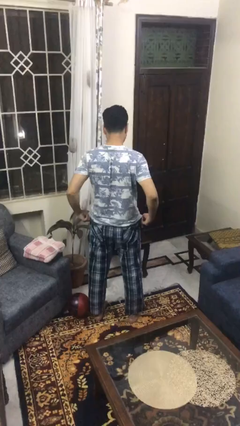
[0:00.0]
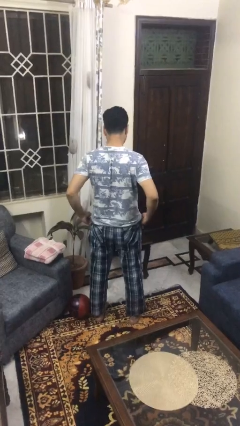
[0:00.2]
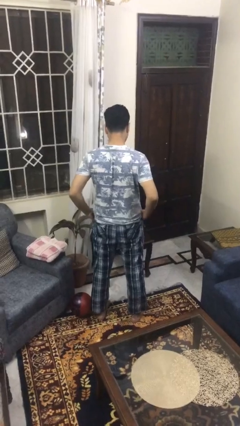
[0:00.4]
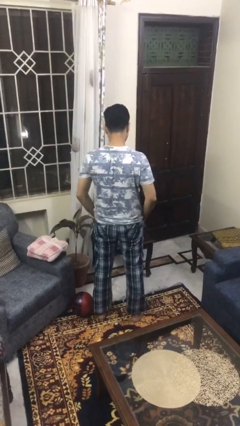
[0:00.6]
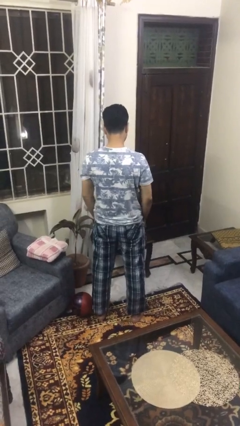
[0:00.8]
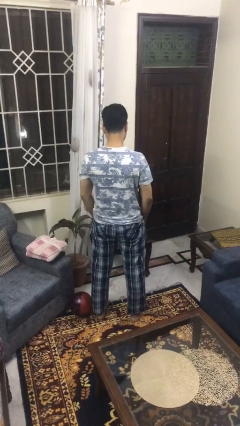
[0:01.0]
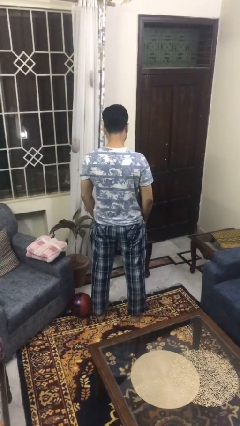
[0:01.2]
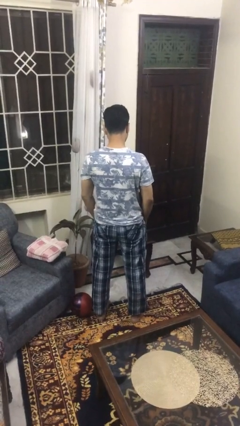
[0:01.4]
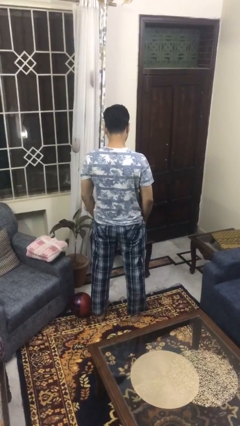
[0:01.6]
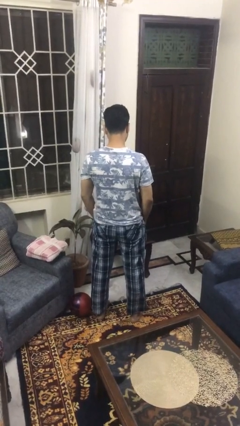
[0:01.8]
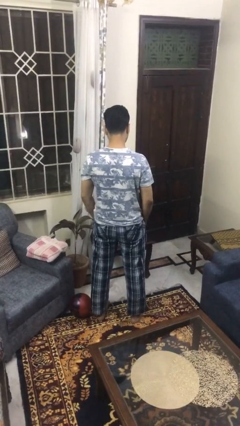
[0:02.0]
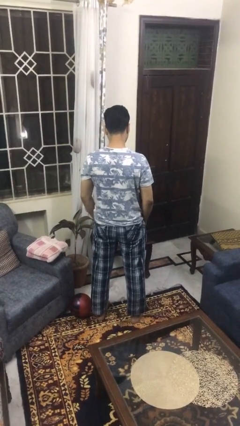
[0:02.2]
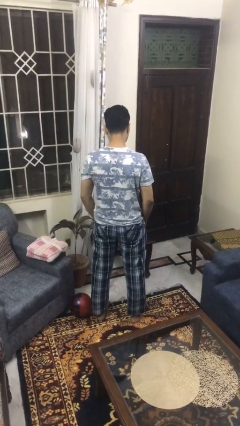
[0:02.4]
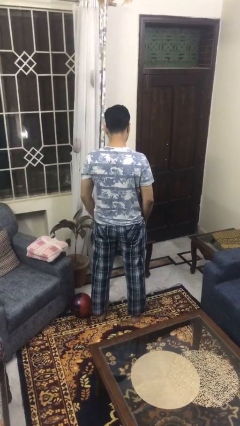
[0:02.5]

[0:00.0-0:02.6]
person puts hands in back pockets

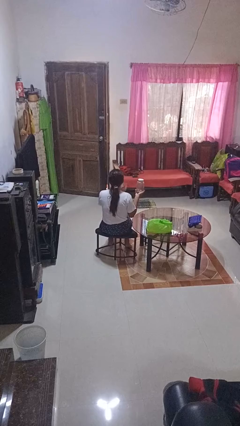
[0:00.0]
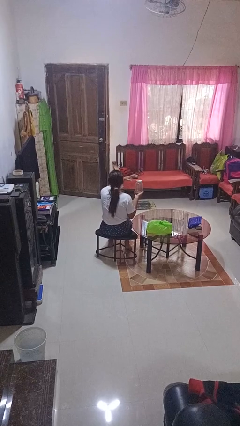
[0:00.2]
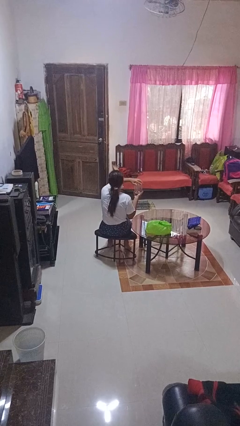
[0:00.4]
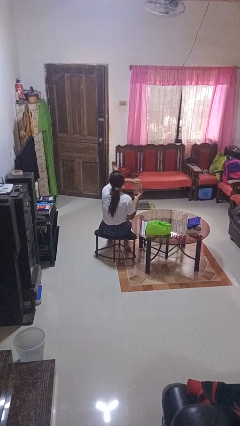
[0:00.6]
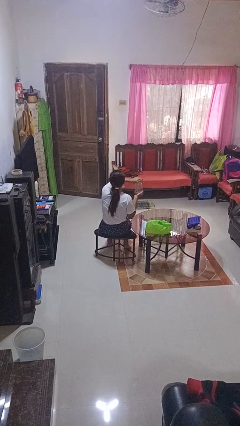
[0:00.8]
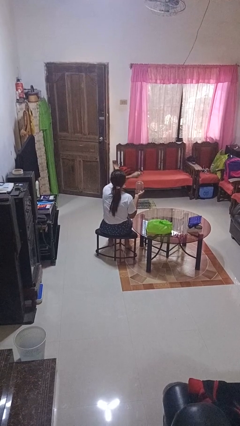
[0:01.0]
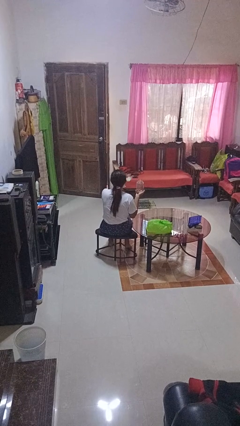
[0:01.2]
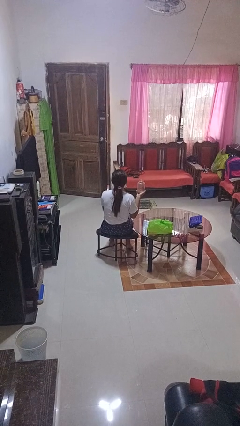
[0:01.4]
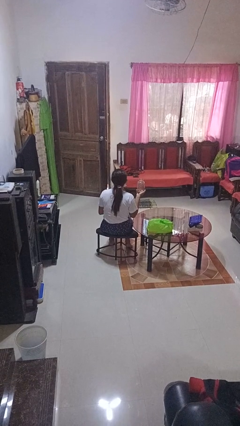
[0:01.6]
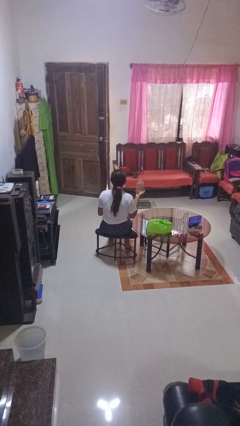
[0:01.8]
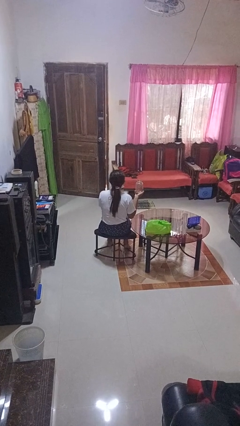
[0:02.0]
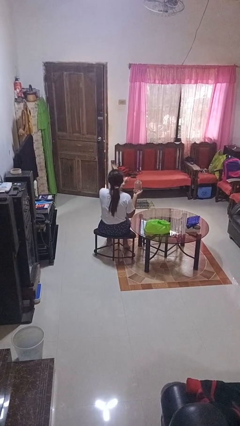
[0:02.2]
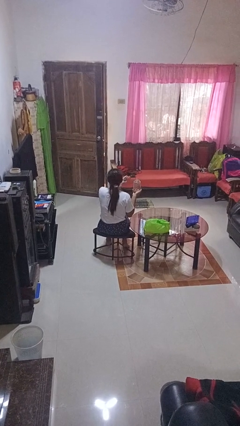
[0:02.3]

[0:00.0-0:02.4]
person opens jar

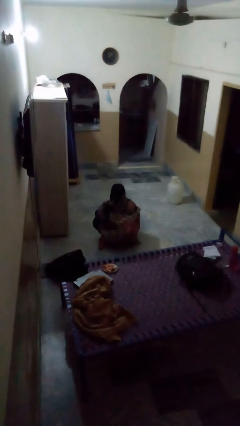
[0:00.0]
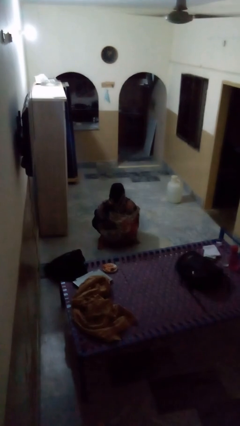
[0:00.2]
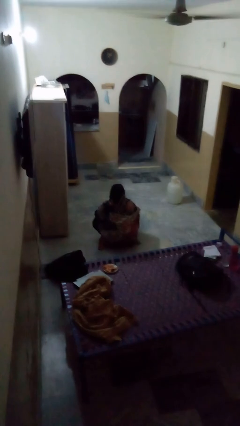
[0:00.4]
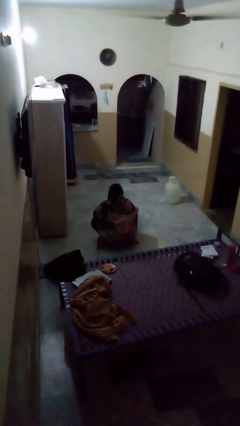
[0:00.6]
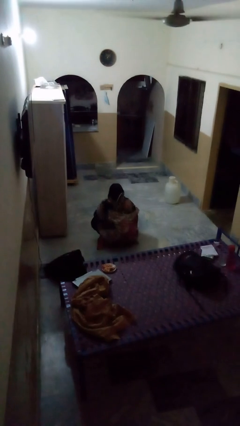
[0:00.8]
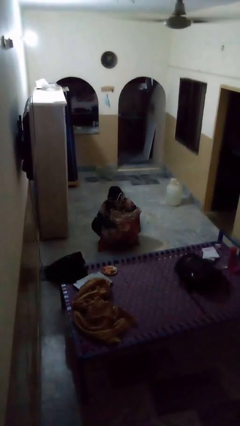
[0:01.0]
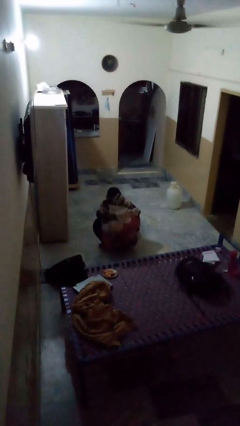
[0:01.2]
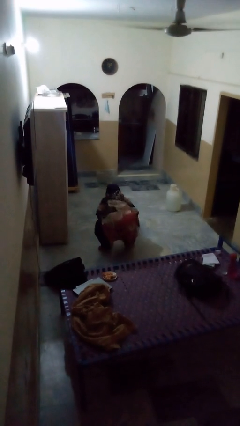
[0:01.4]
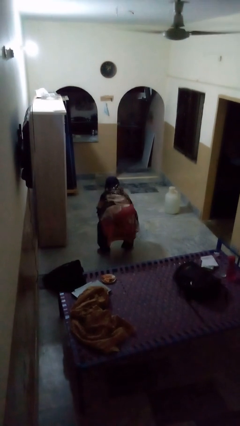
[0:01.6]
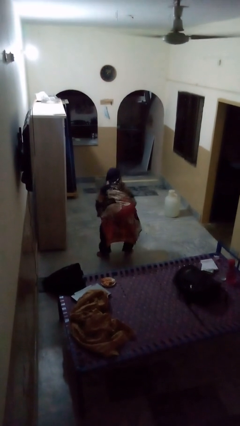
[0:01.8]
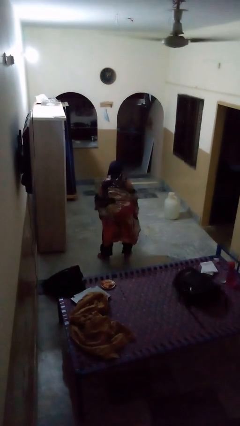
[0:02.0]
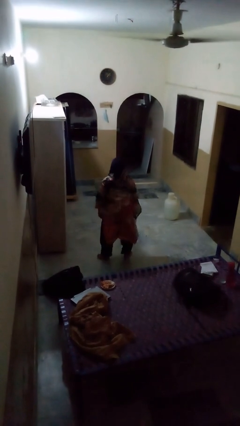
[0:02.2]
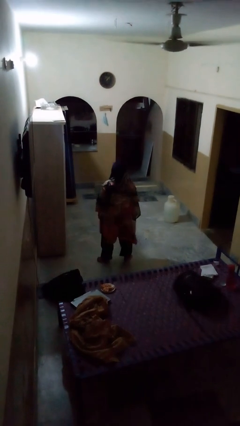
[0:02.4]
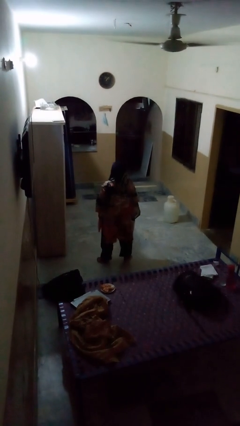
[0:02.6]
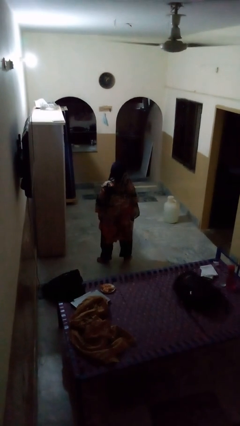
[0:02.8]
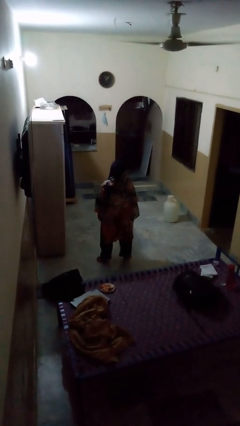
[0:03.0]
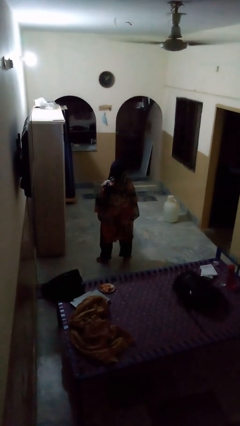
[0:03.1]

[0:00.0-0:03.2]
person stands up

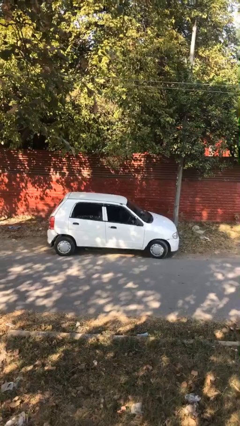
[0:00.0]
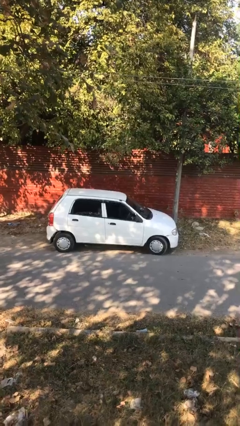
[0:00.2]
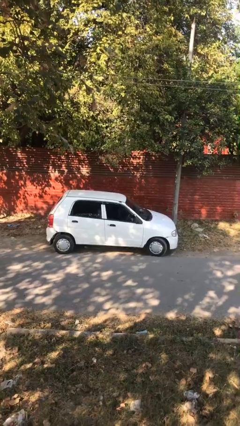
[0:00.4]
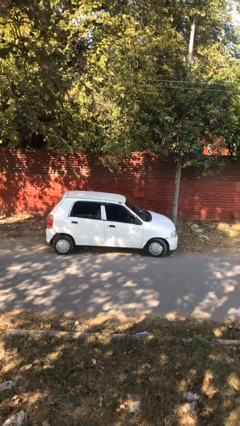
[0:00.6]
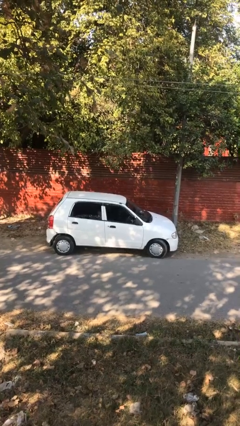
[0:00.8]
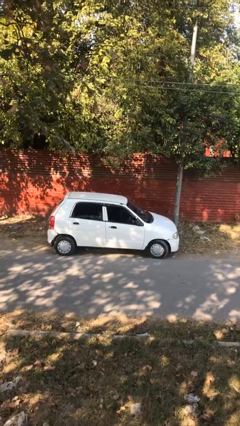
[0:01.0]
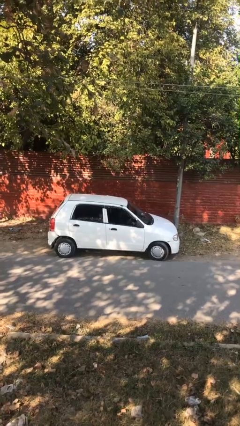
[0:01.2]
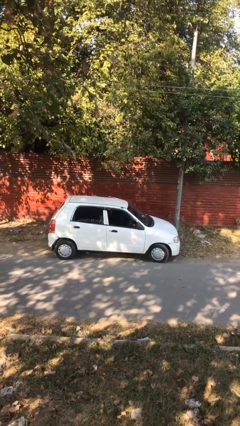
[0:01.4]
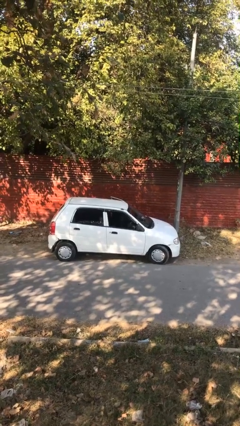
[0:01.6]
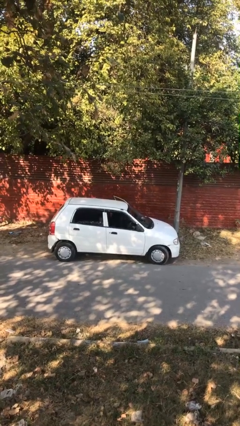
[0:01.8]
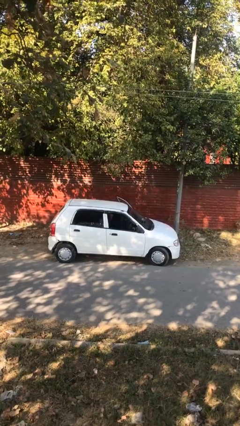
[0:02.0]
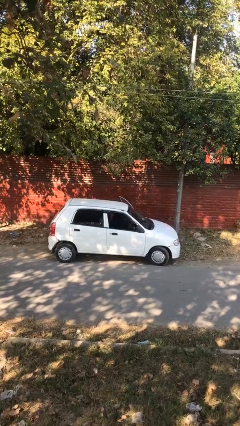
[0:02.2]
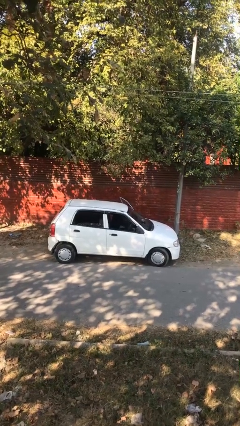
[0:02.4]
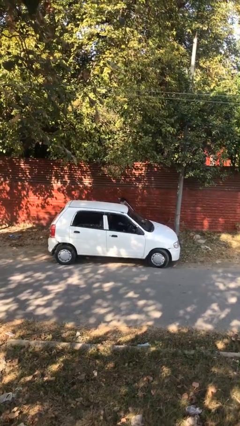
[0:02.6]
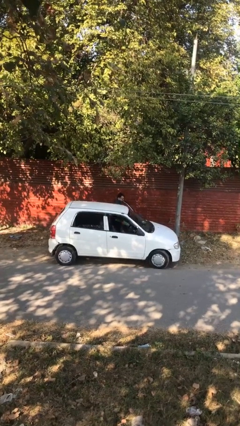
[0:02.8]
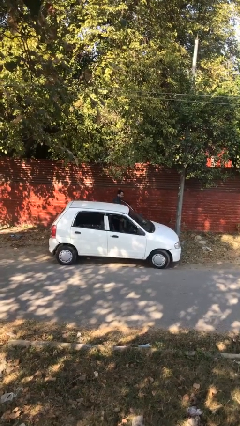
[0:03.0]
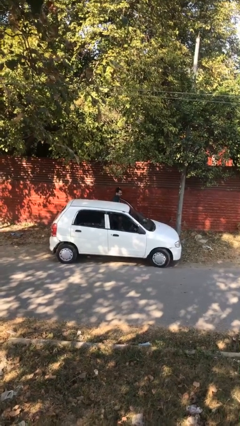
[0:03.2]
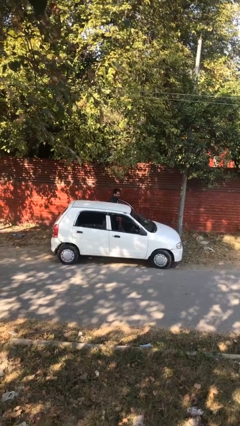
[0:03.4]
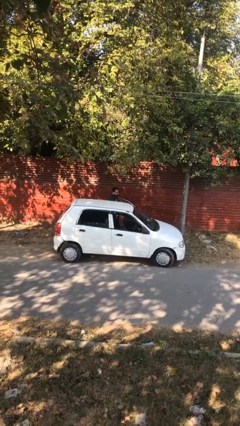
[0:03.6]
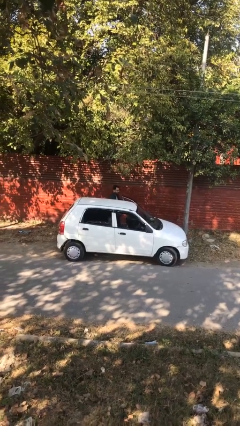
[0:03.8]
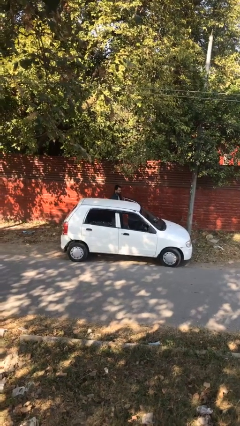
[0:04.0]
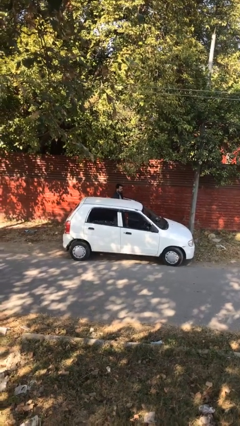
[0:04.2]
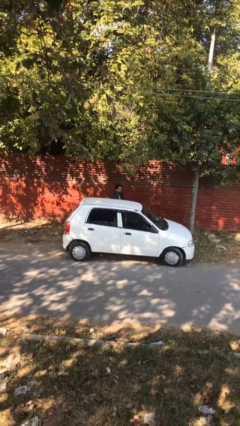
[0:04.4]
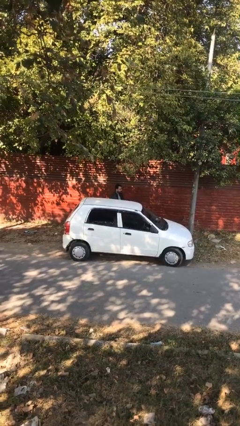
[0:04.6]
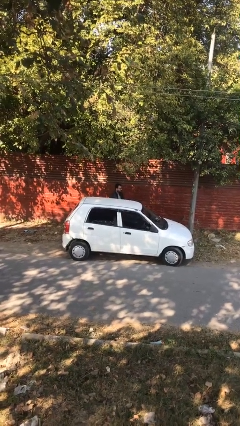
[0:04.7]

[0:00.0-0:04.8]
person exits car

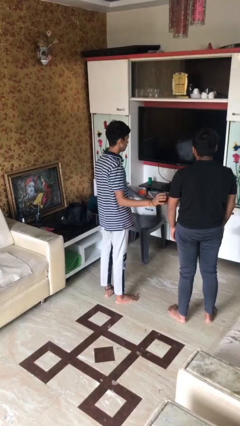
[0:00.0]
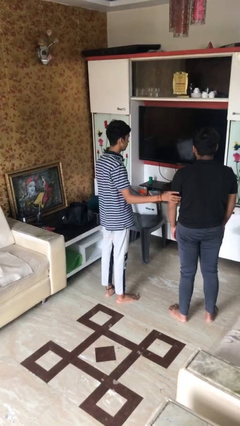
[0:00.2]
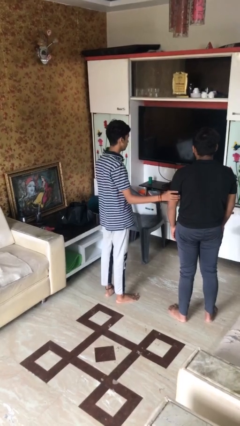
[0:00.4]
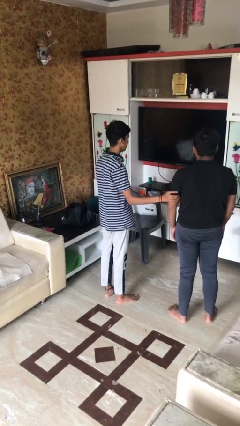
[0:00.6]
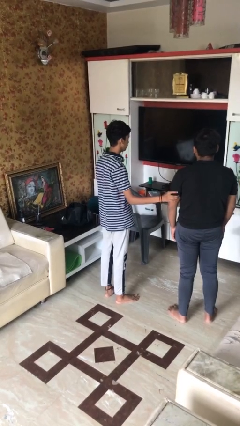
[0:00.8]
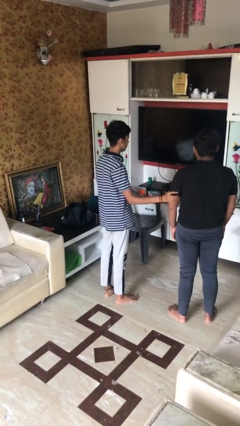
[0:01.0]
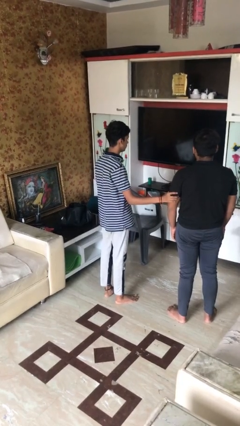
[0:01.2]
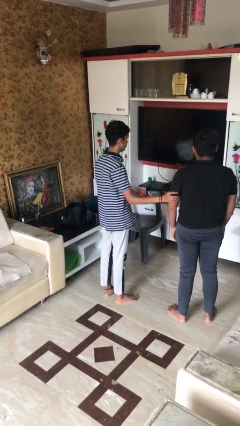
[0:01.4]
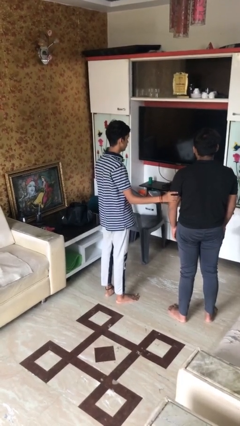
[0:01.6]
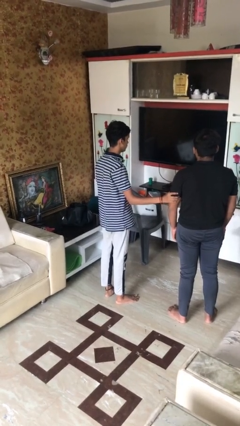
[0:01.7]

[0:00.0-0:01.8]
person grabs person by bicep

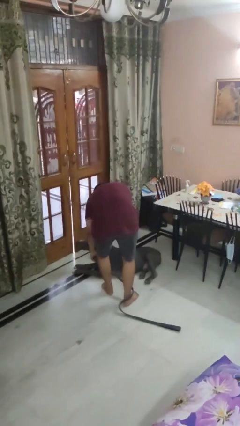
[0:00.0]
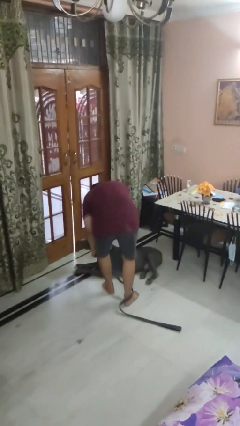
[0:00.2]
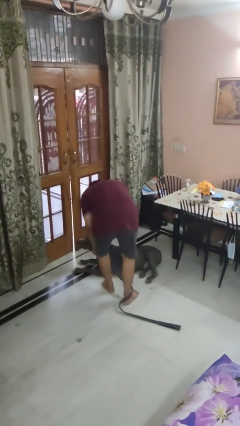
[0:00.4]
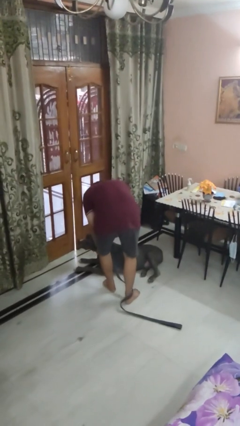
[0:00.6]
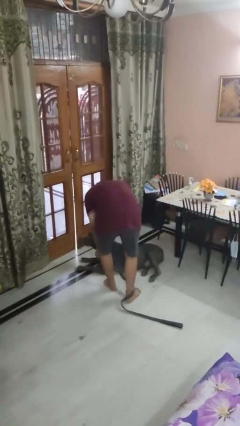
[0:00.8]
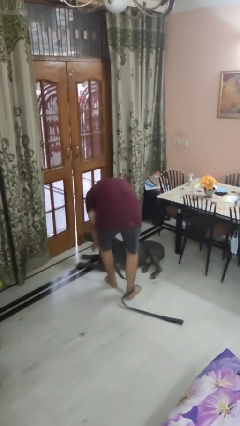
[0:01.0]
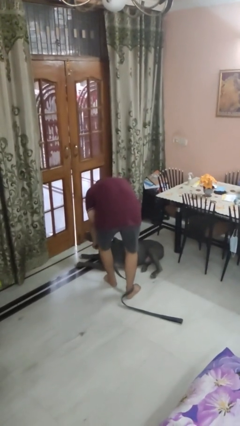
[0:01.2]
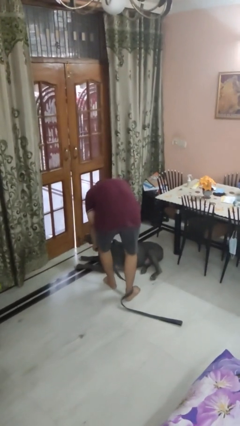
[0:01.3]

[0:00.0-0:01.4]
person attaches leash to dog

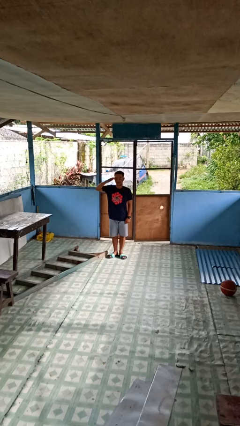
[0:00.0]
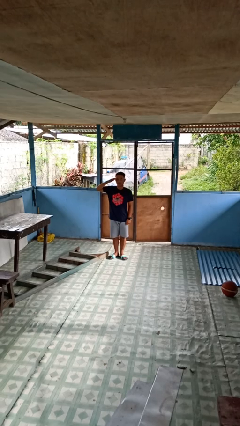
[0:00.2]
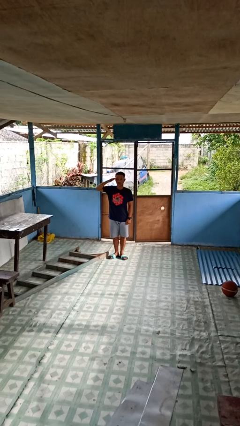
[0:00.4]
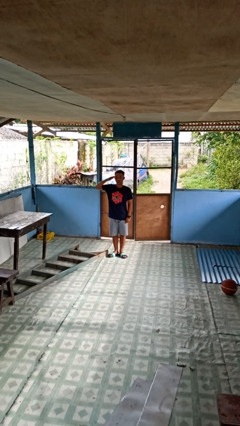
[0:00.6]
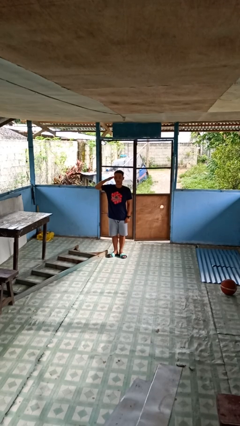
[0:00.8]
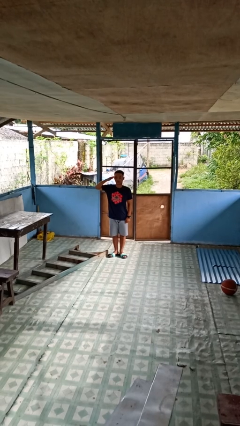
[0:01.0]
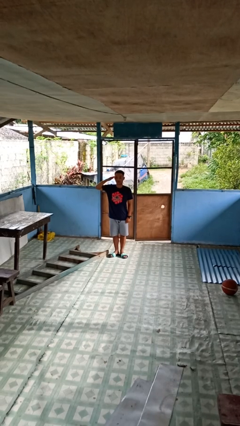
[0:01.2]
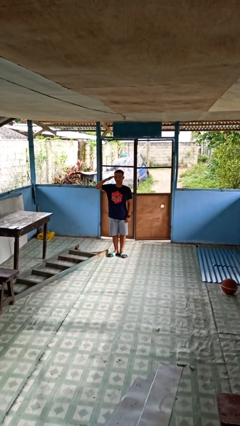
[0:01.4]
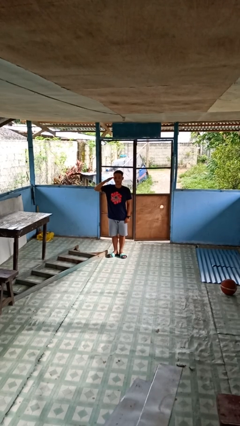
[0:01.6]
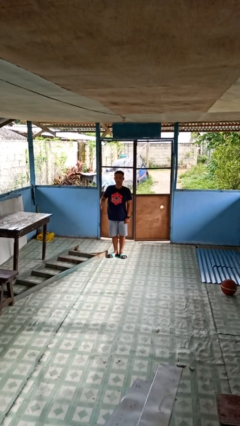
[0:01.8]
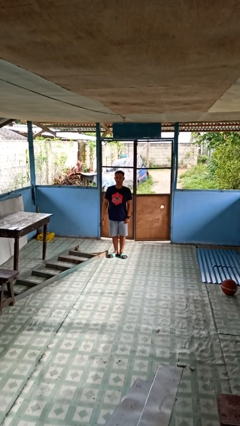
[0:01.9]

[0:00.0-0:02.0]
person salutes
